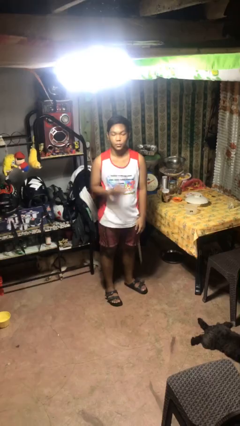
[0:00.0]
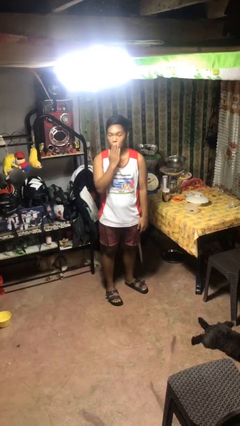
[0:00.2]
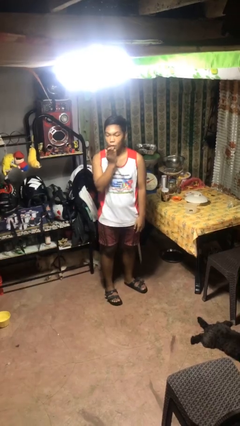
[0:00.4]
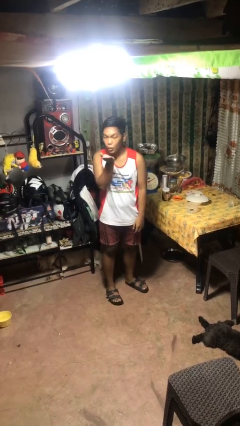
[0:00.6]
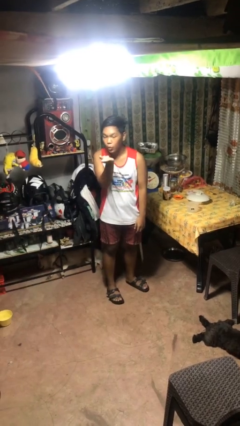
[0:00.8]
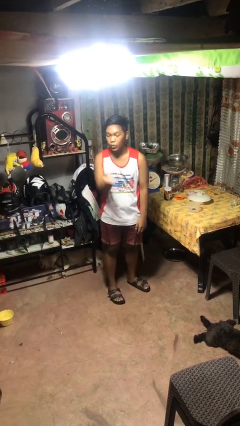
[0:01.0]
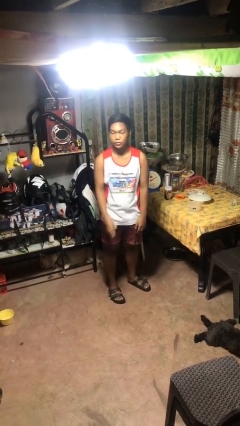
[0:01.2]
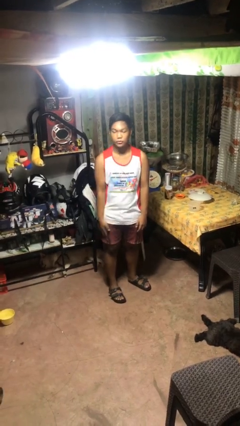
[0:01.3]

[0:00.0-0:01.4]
person gestures blow kiss

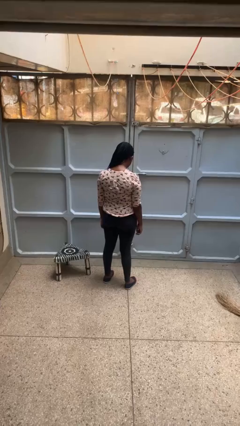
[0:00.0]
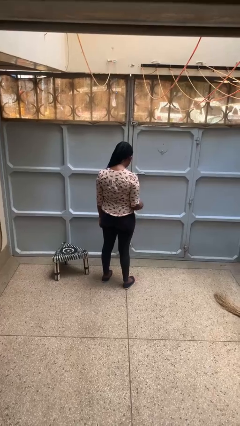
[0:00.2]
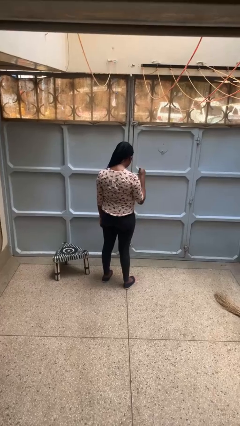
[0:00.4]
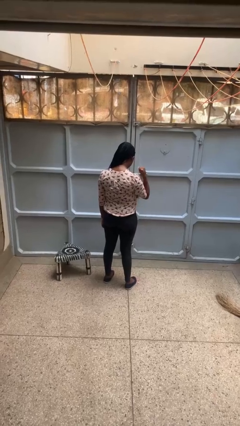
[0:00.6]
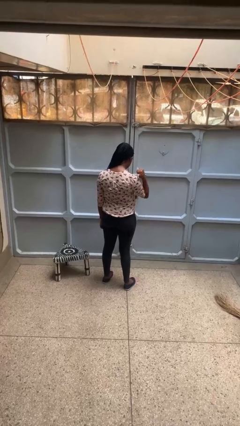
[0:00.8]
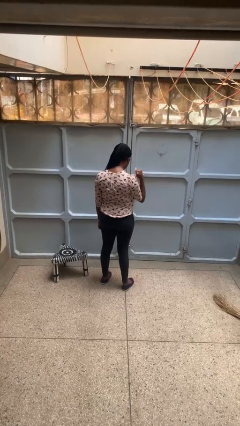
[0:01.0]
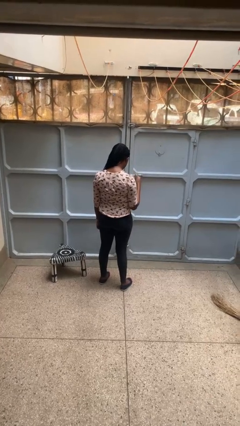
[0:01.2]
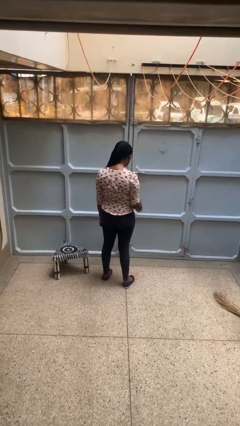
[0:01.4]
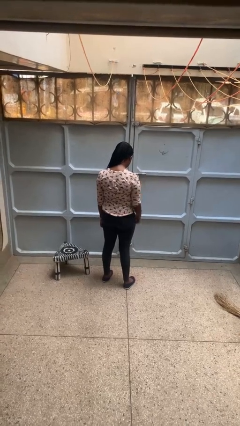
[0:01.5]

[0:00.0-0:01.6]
person gestures behind me

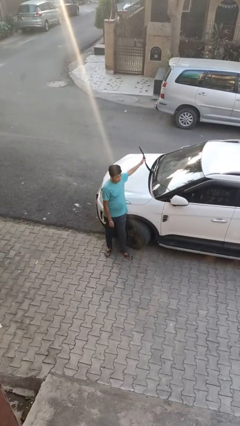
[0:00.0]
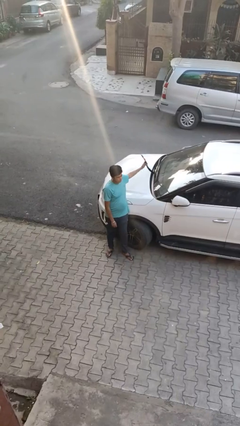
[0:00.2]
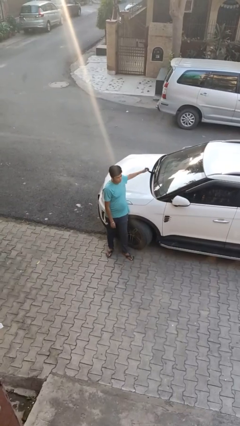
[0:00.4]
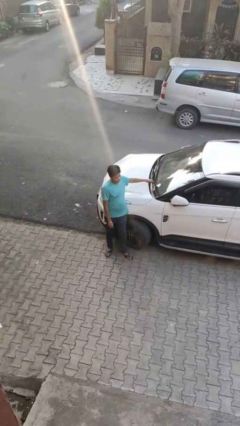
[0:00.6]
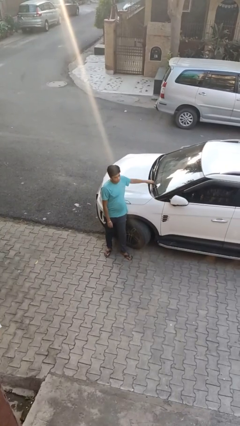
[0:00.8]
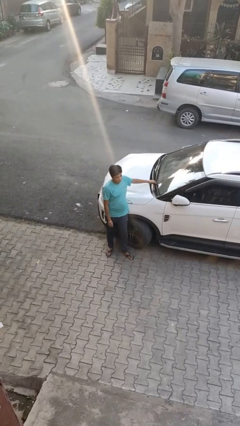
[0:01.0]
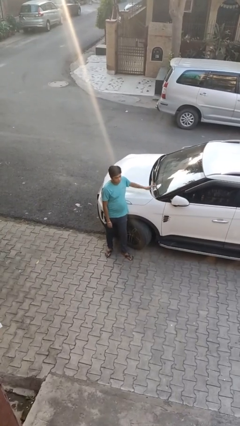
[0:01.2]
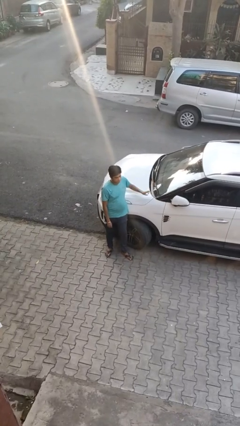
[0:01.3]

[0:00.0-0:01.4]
person flips down car wipers

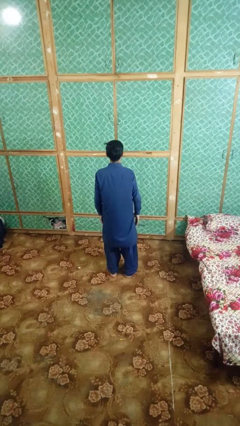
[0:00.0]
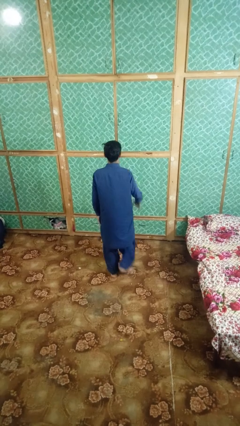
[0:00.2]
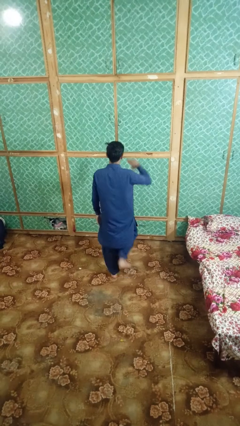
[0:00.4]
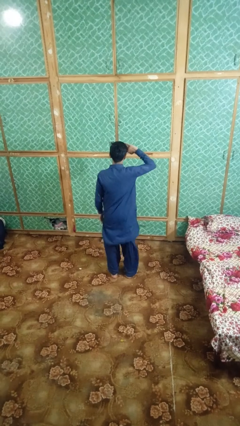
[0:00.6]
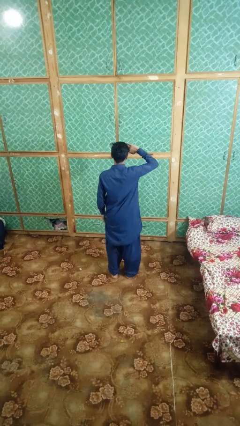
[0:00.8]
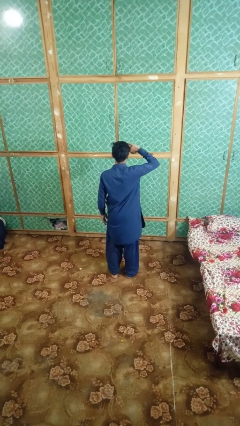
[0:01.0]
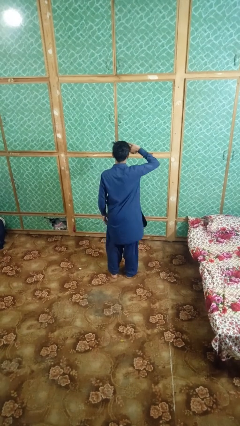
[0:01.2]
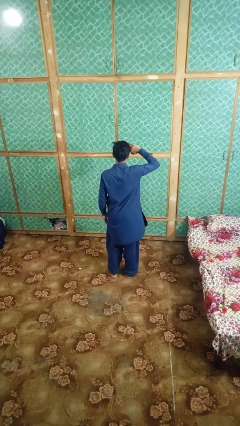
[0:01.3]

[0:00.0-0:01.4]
person salutes

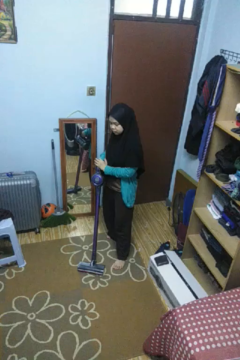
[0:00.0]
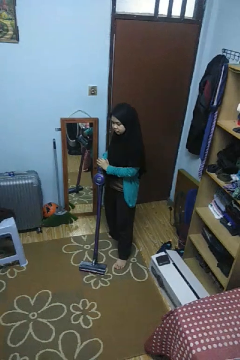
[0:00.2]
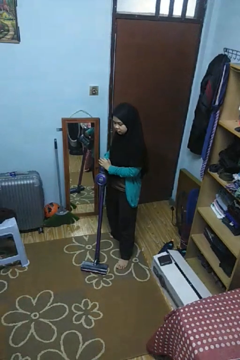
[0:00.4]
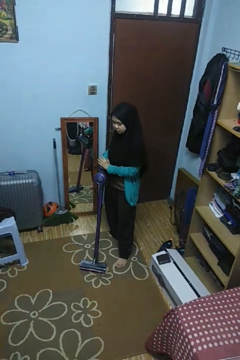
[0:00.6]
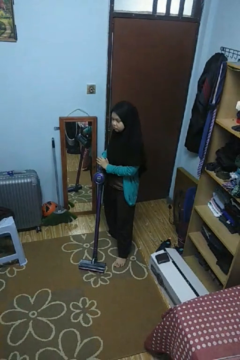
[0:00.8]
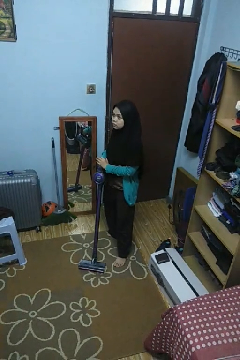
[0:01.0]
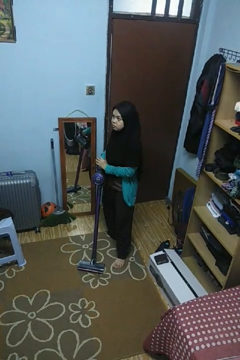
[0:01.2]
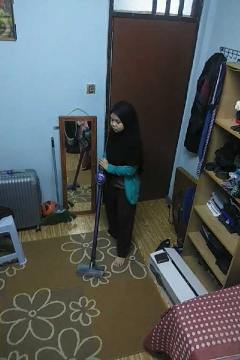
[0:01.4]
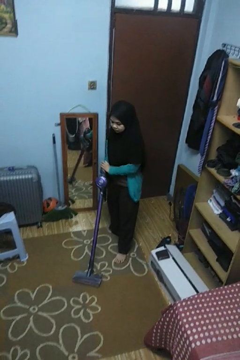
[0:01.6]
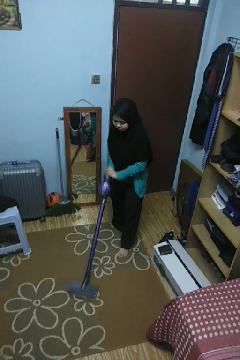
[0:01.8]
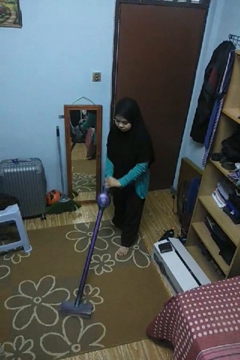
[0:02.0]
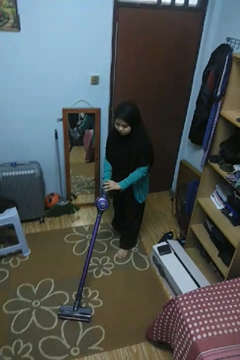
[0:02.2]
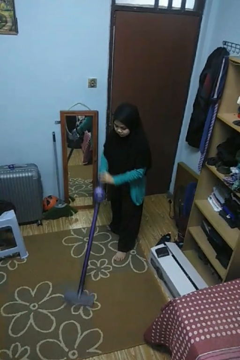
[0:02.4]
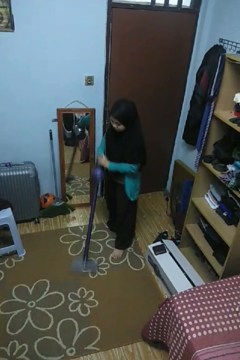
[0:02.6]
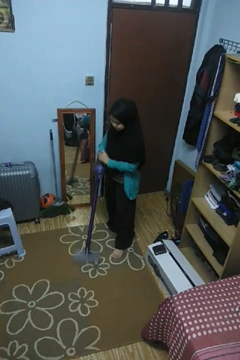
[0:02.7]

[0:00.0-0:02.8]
person vacuums carpet

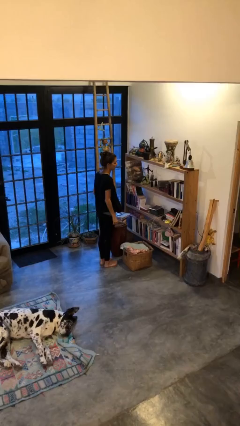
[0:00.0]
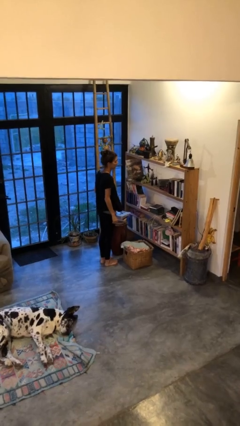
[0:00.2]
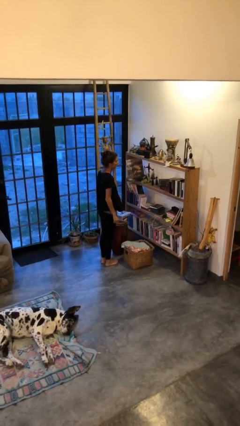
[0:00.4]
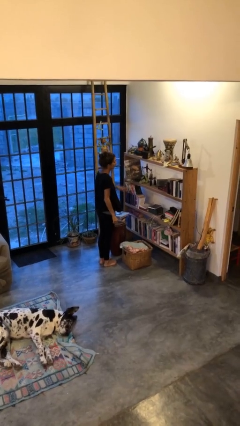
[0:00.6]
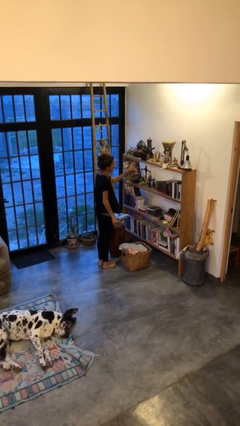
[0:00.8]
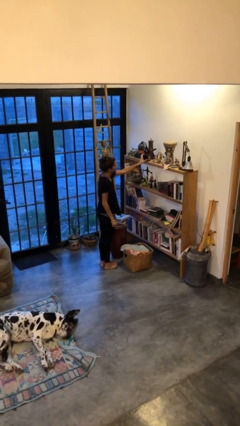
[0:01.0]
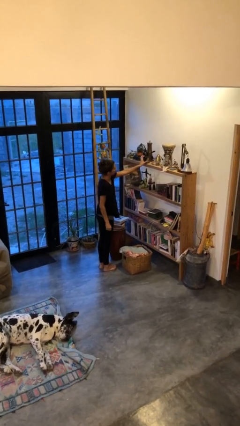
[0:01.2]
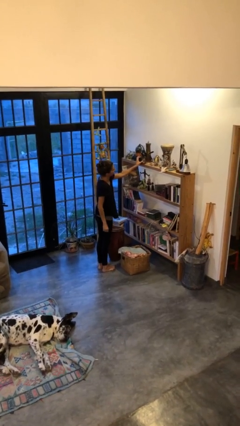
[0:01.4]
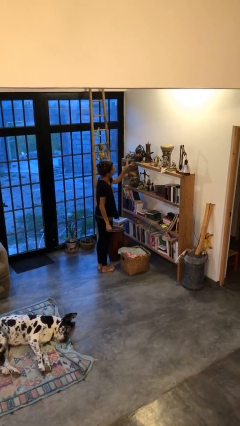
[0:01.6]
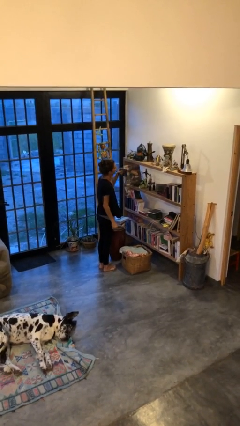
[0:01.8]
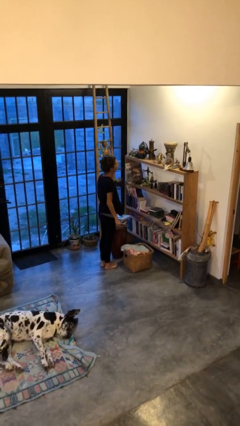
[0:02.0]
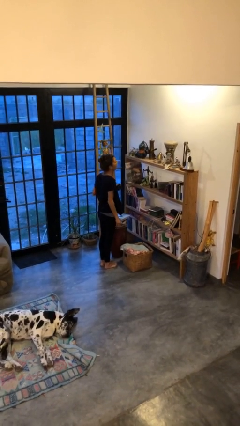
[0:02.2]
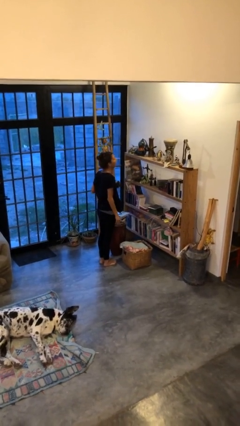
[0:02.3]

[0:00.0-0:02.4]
person picks up object from countertop

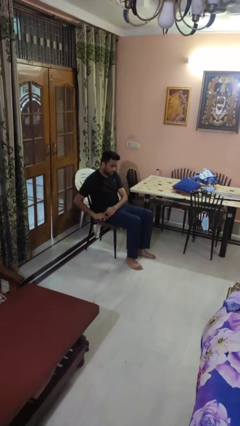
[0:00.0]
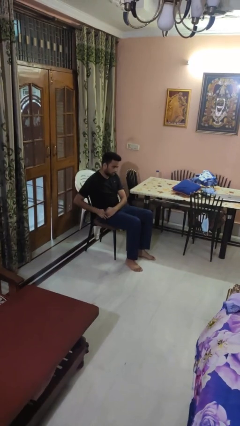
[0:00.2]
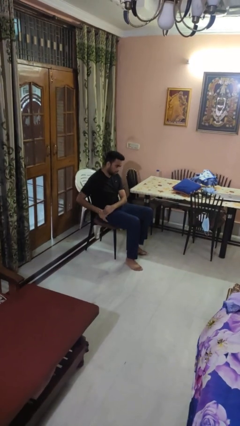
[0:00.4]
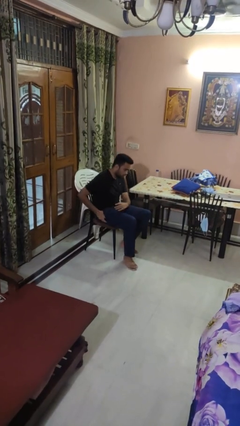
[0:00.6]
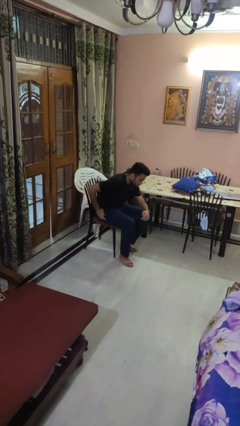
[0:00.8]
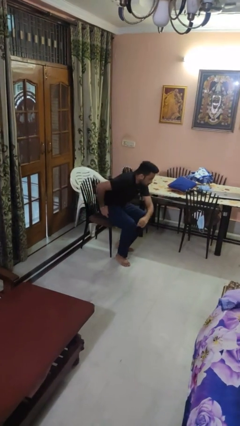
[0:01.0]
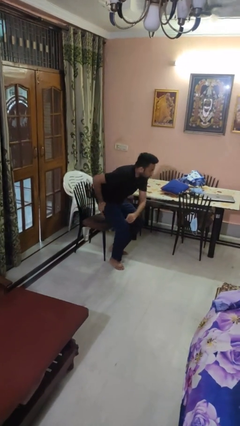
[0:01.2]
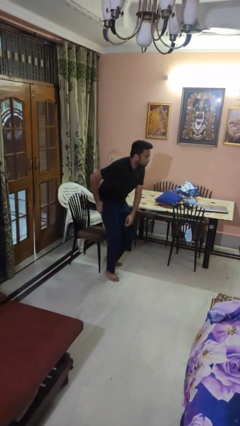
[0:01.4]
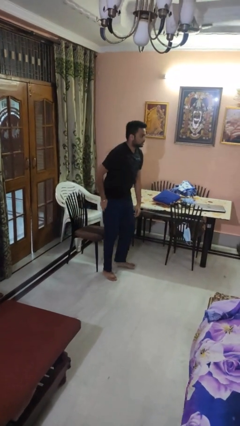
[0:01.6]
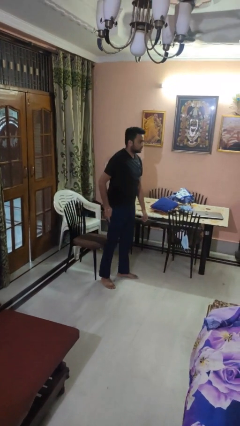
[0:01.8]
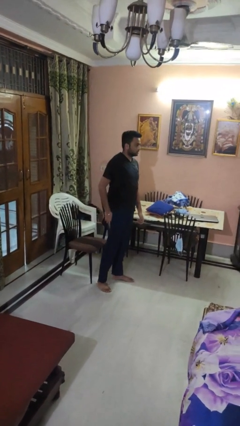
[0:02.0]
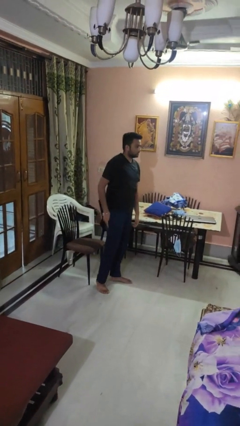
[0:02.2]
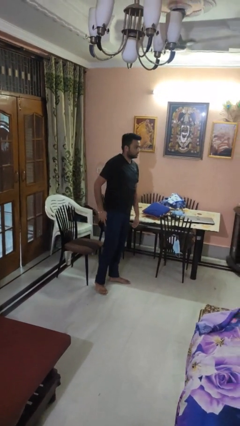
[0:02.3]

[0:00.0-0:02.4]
person puts phone into pocket

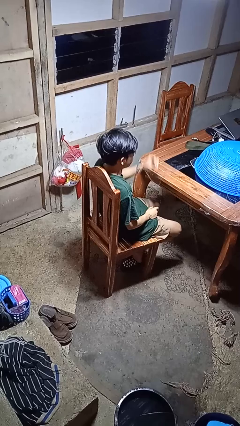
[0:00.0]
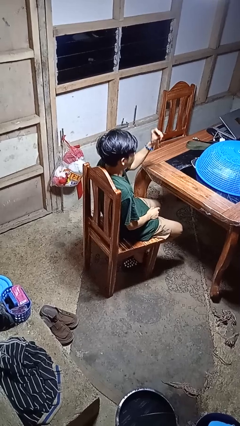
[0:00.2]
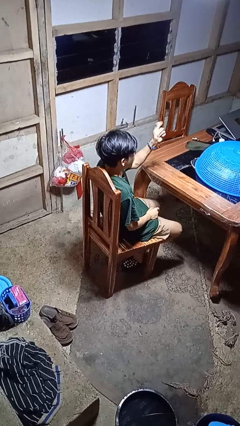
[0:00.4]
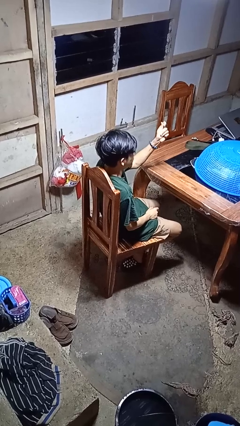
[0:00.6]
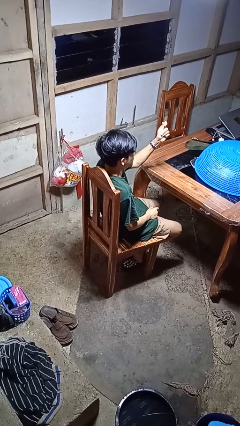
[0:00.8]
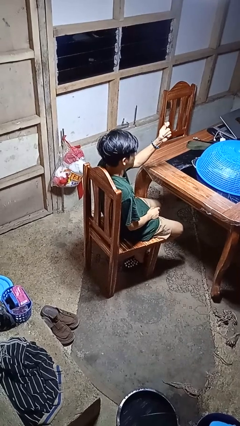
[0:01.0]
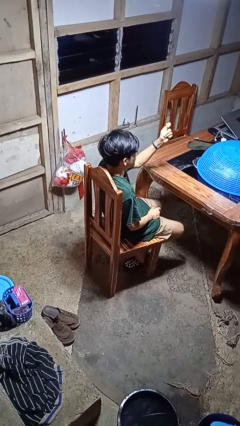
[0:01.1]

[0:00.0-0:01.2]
person snaps fingers

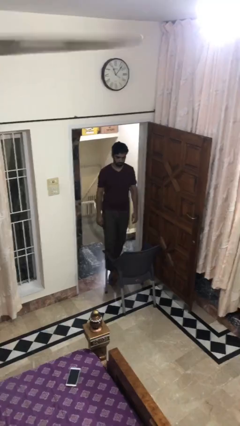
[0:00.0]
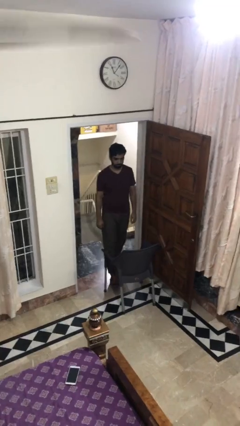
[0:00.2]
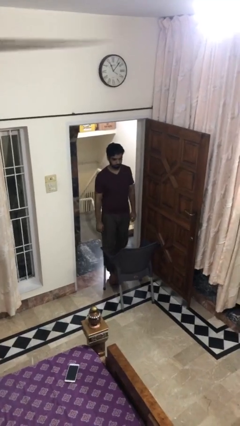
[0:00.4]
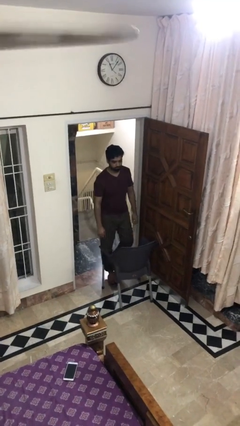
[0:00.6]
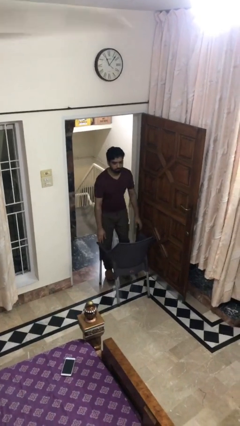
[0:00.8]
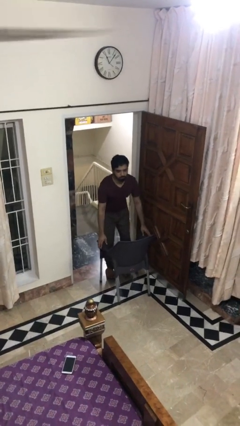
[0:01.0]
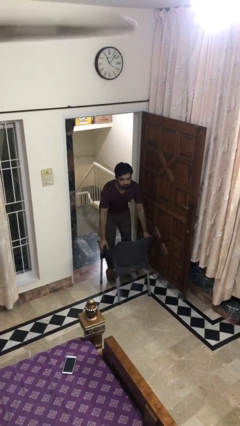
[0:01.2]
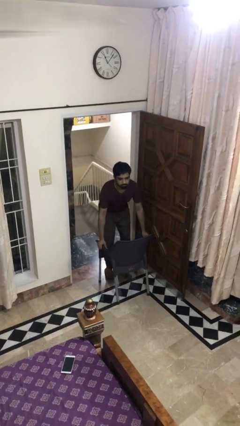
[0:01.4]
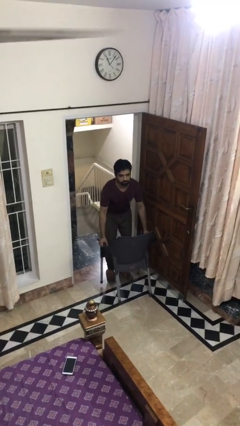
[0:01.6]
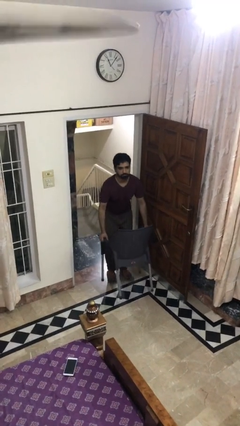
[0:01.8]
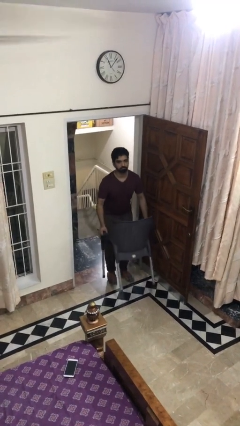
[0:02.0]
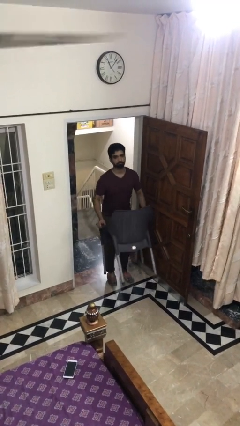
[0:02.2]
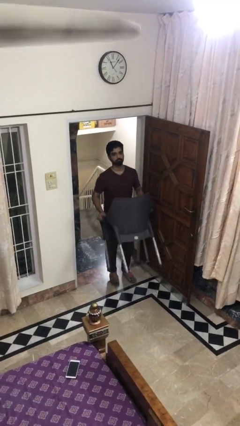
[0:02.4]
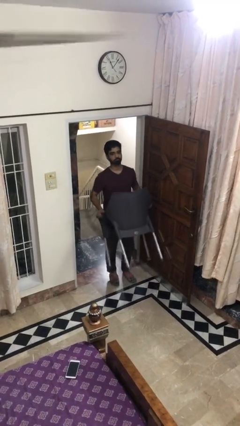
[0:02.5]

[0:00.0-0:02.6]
person picks up object from floor
